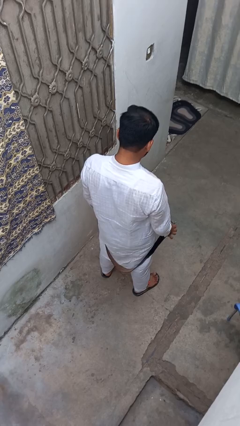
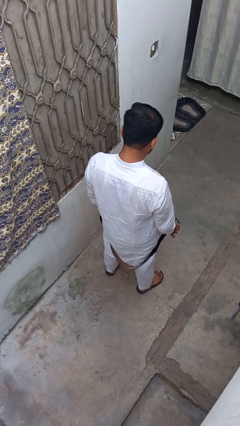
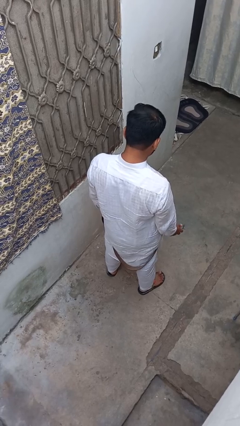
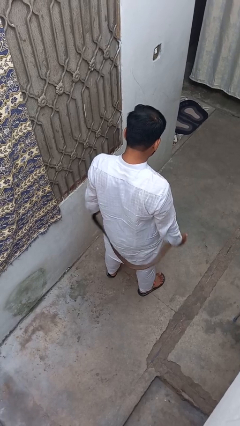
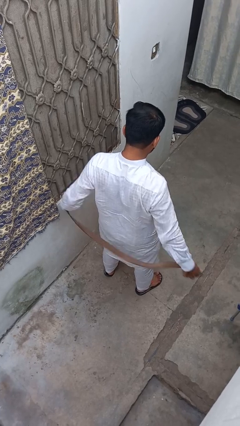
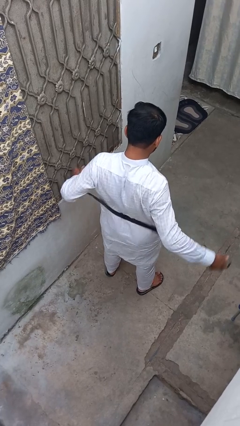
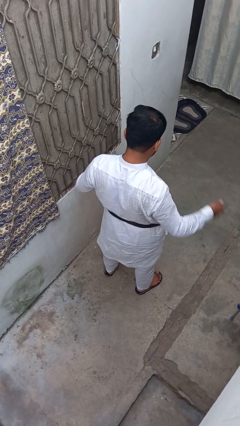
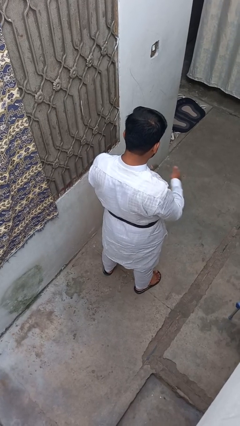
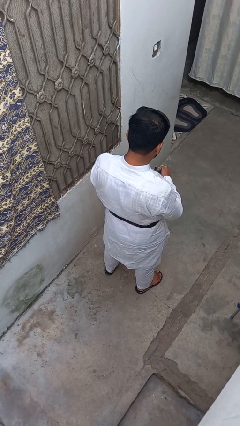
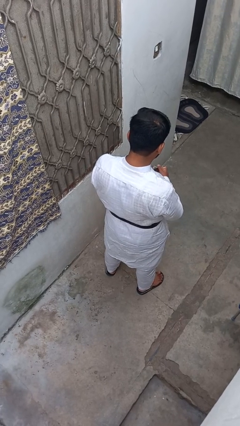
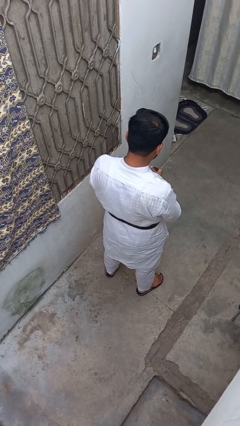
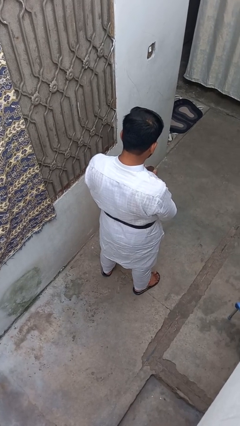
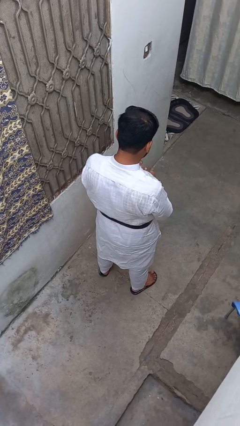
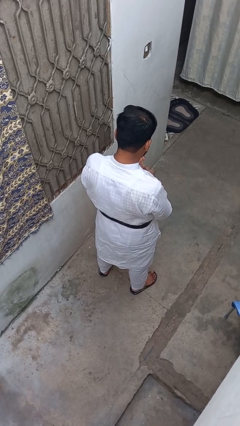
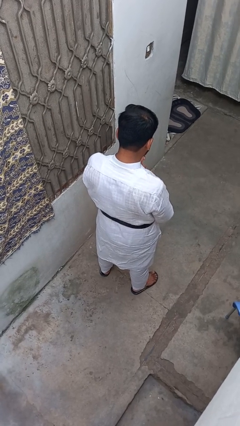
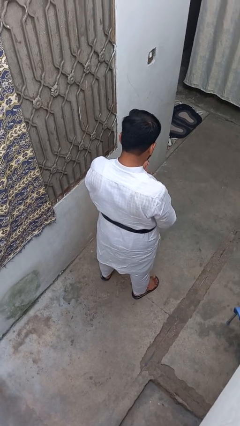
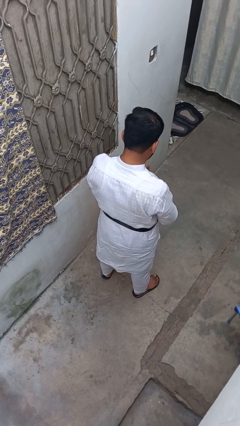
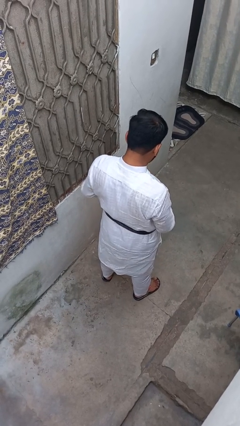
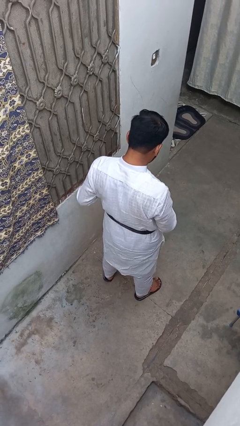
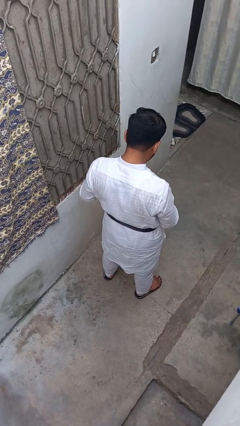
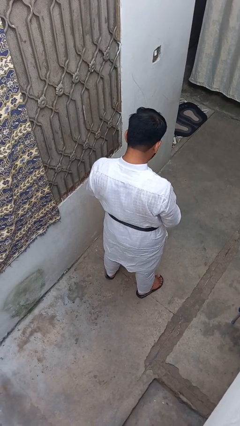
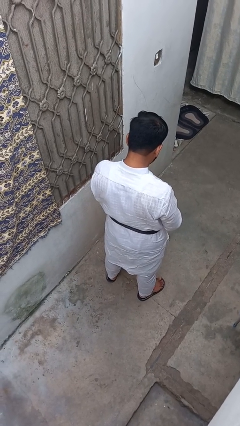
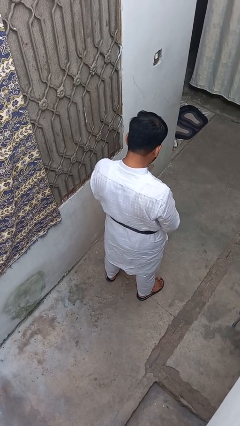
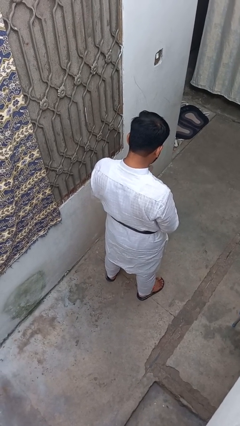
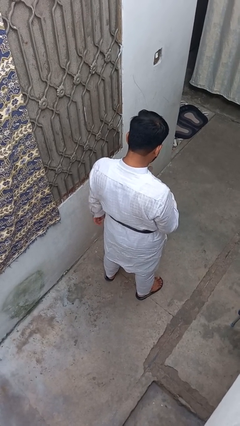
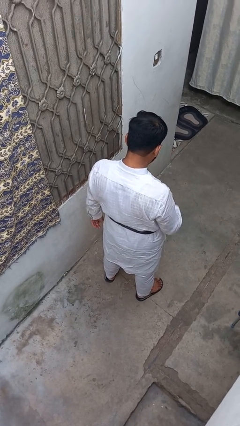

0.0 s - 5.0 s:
person puts on belt

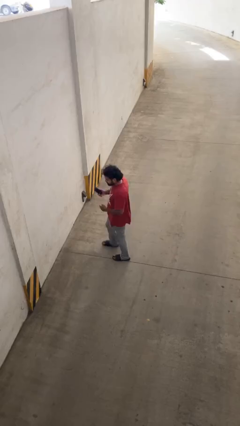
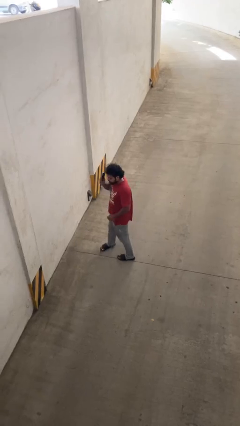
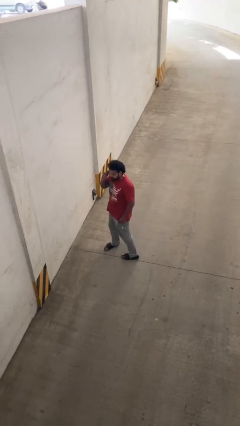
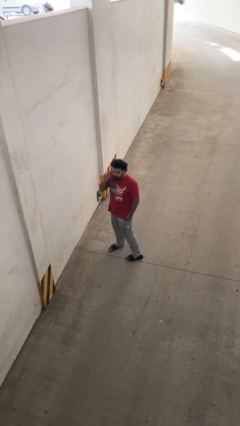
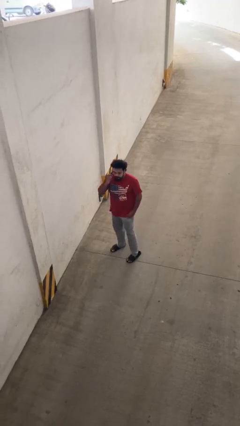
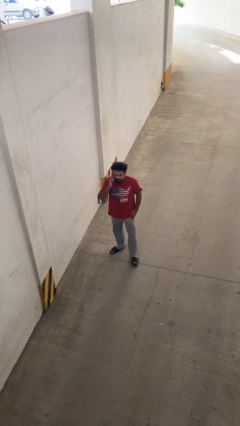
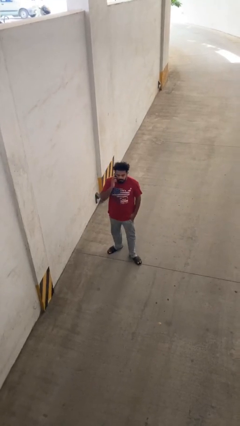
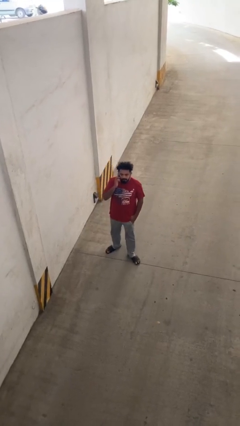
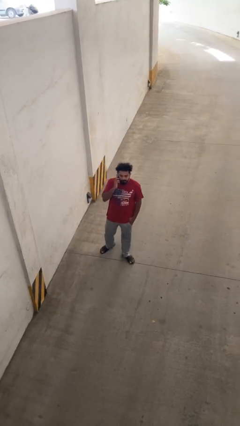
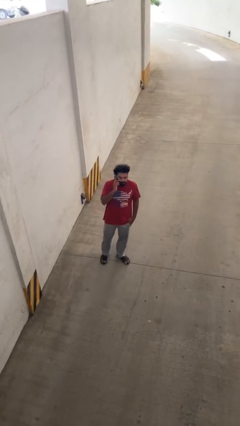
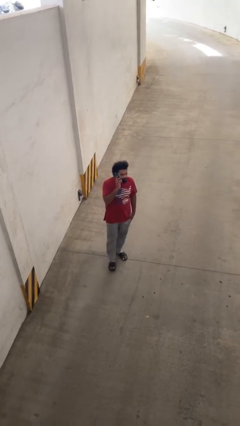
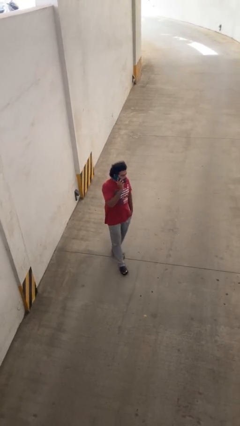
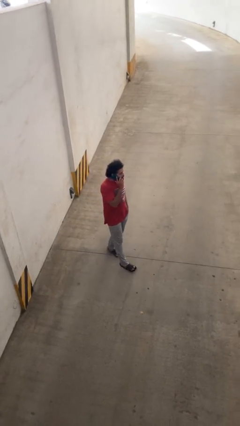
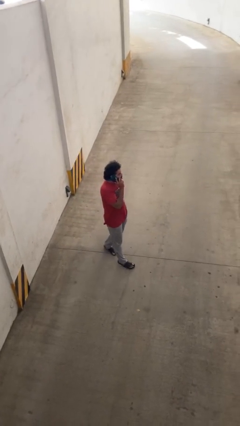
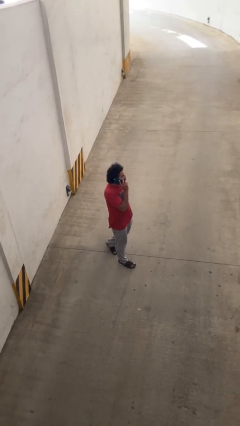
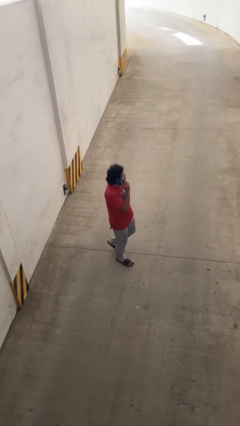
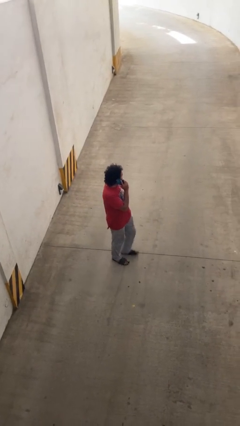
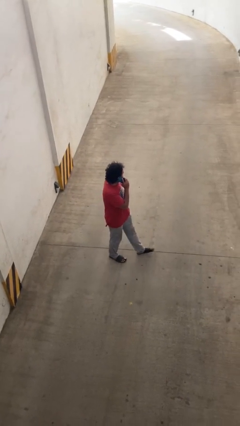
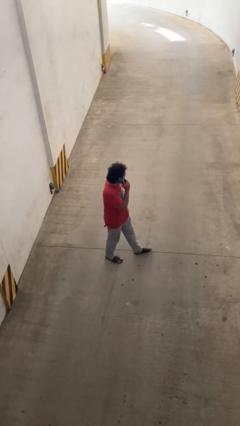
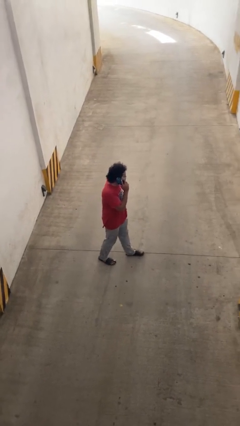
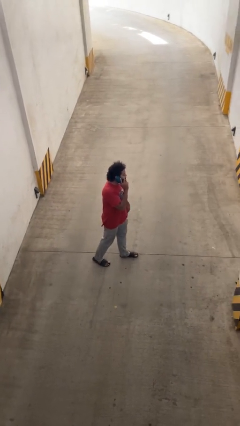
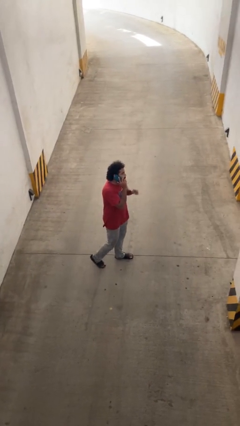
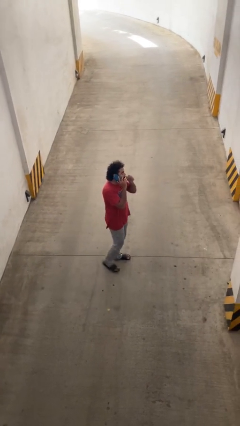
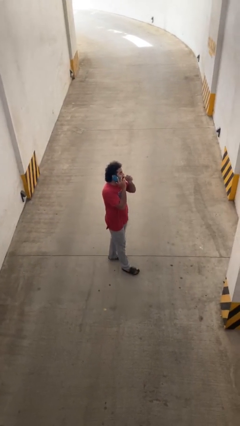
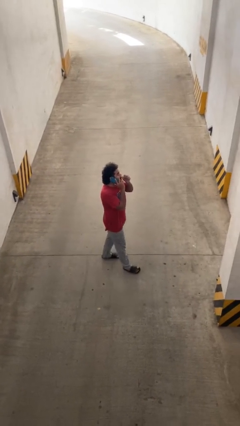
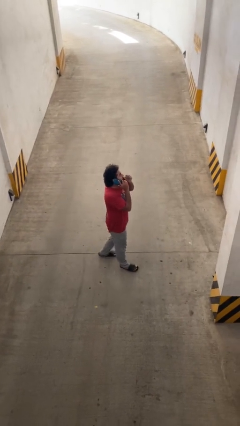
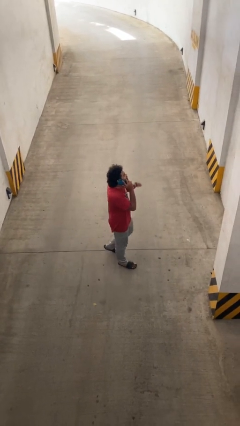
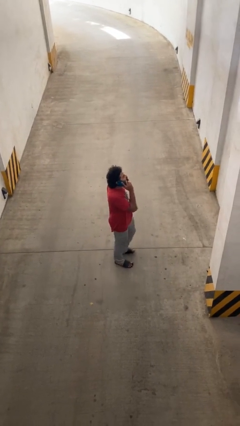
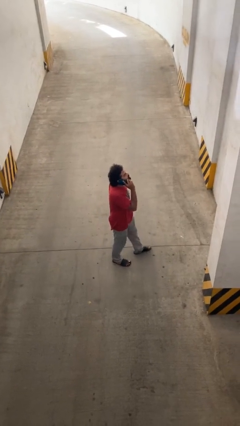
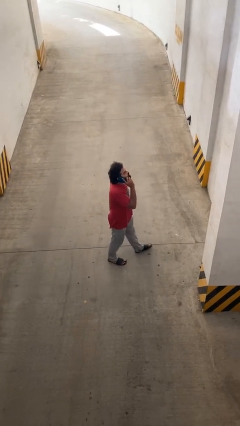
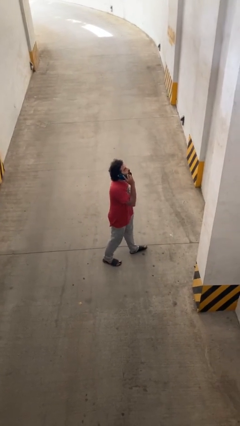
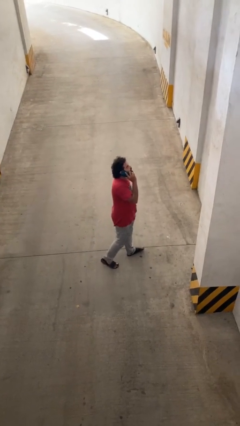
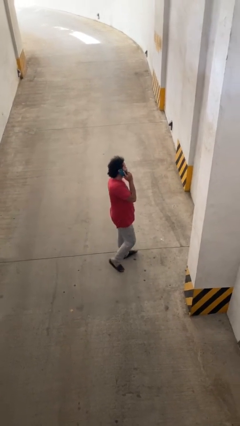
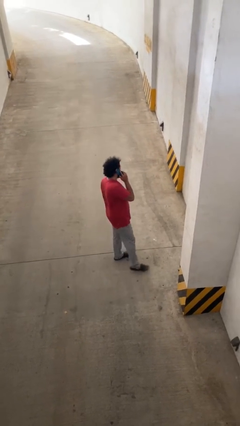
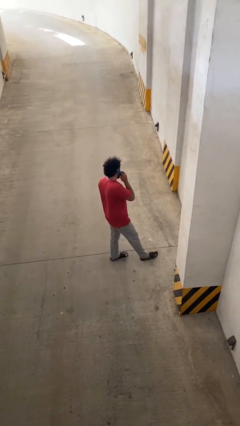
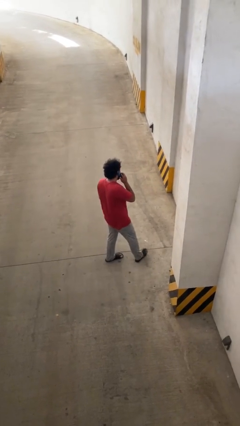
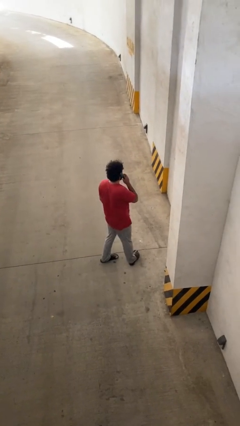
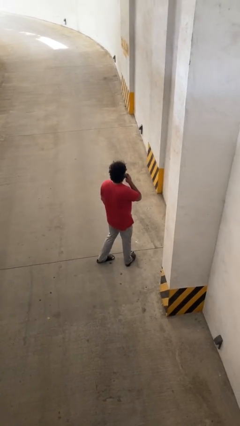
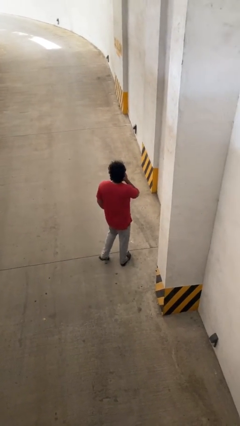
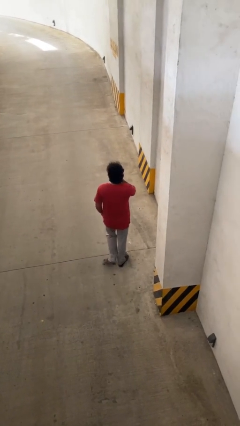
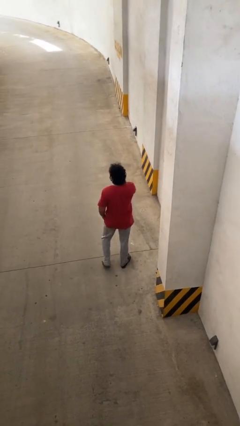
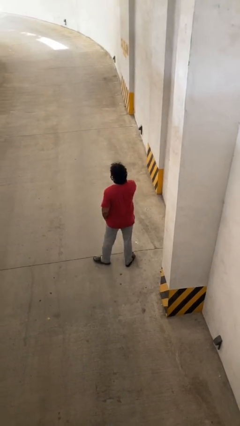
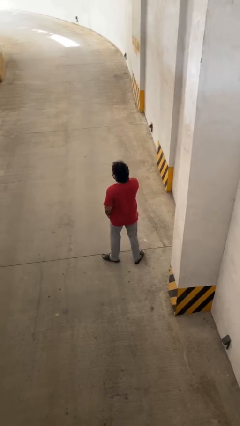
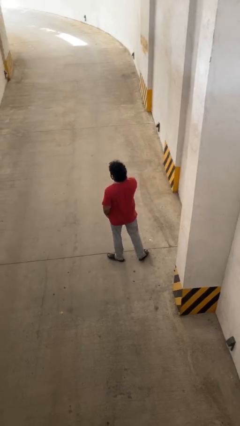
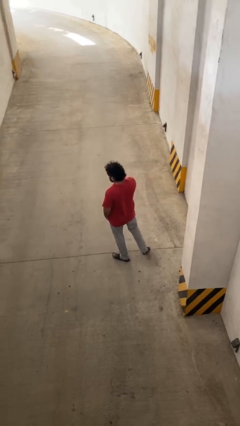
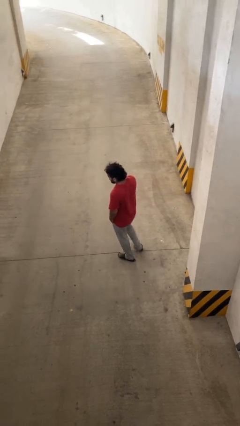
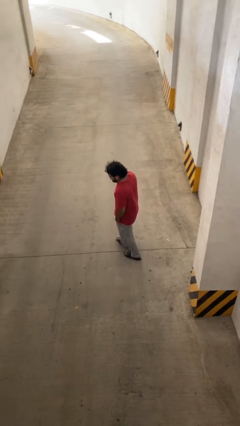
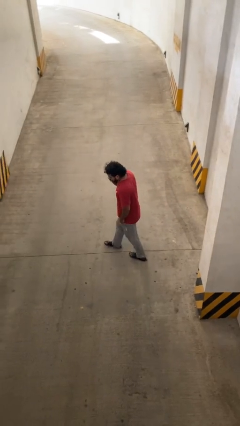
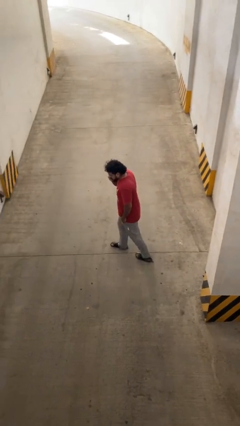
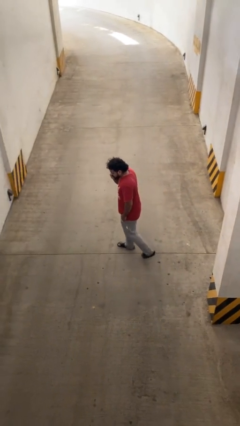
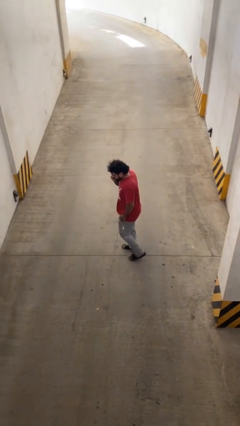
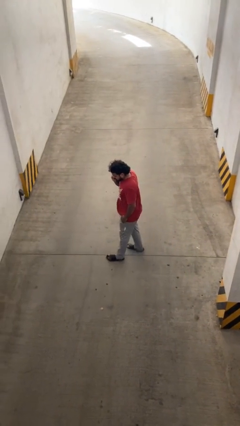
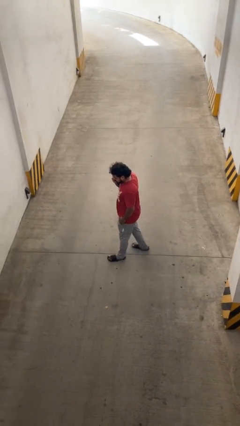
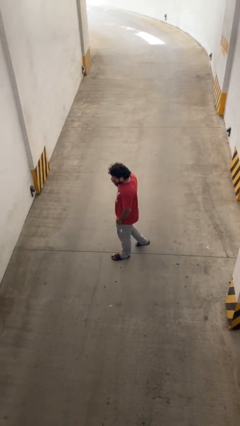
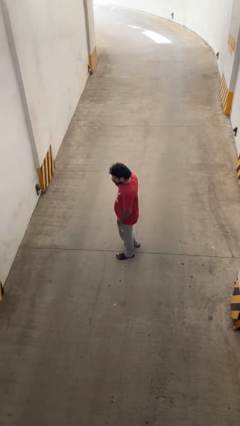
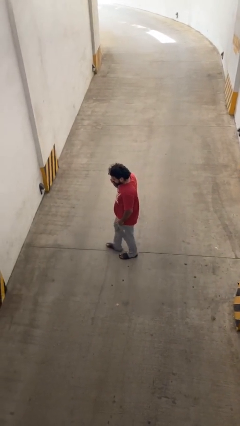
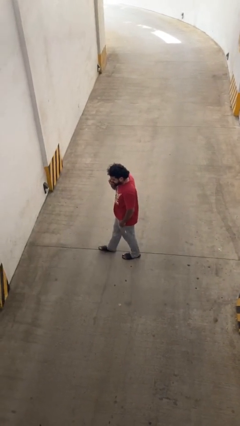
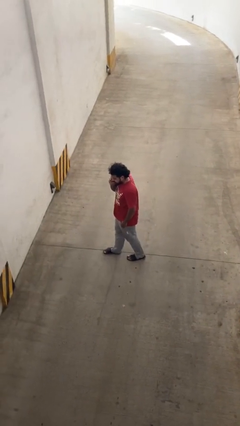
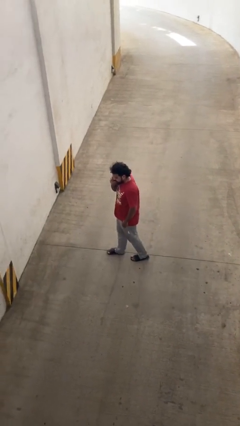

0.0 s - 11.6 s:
person talks on phone

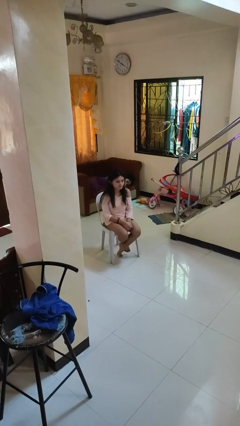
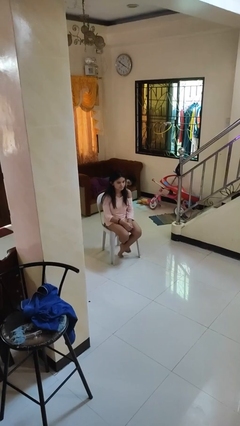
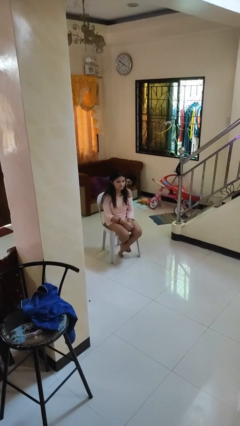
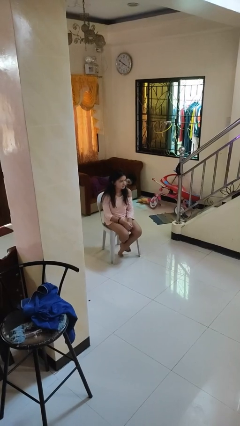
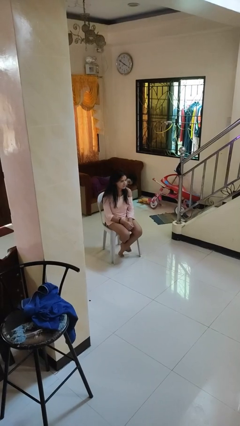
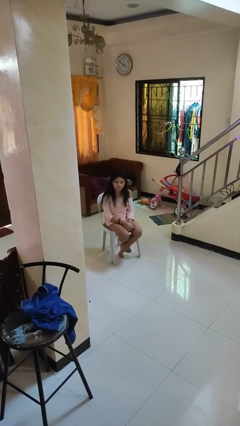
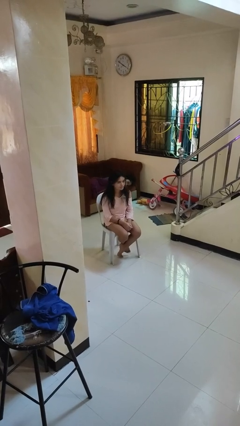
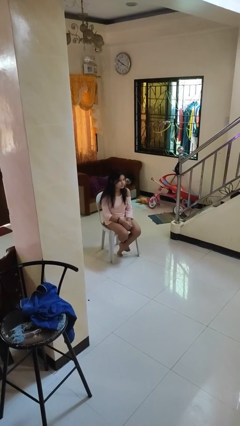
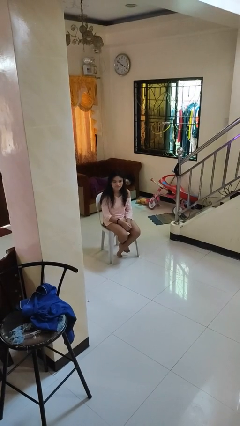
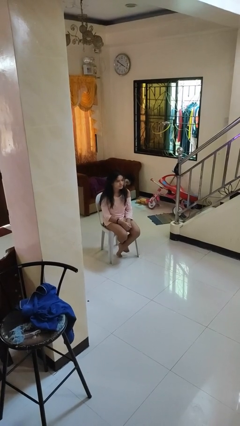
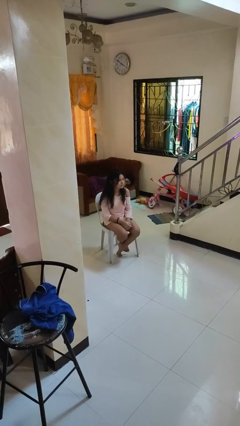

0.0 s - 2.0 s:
person shakes head
